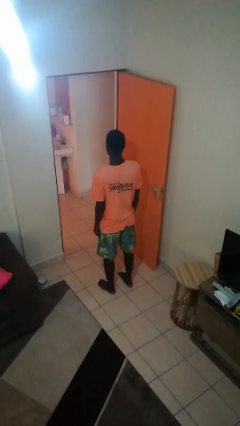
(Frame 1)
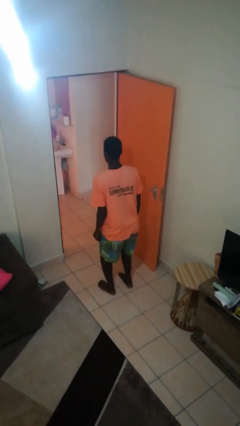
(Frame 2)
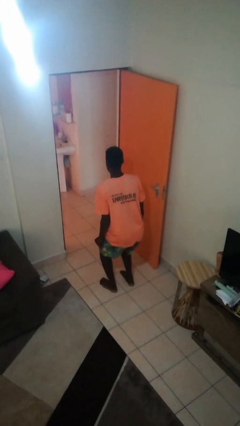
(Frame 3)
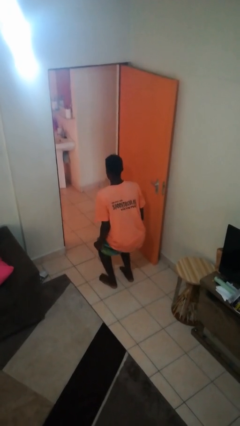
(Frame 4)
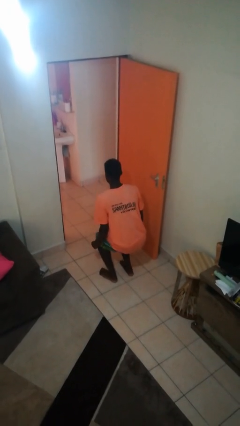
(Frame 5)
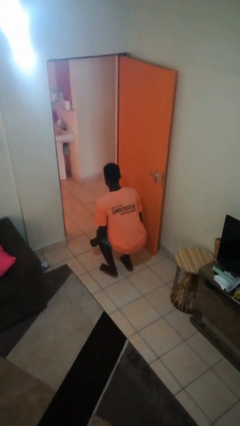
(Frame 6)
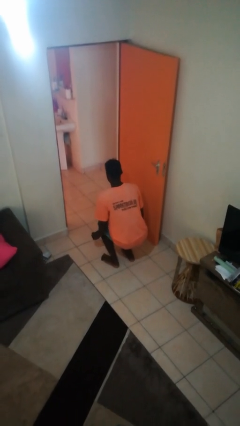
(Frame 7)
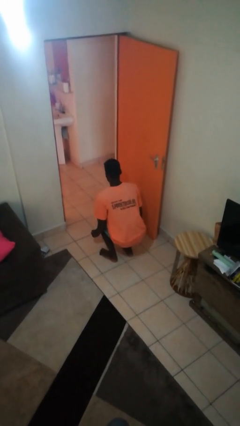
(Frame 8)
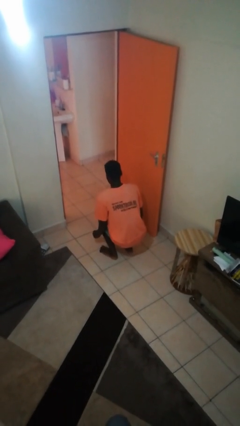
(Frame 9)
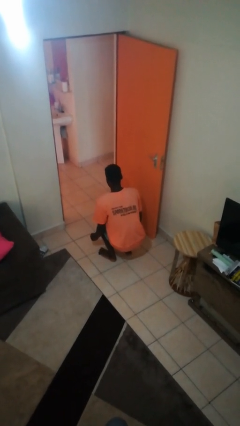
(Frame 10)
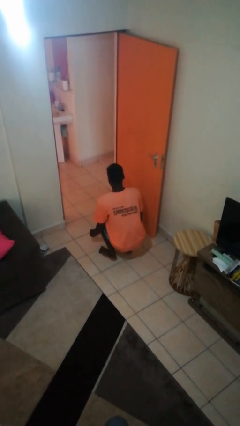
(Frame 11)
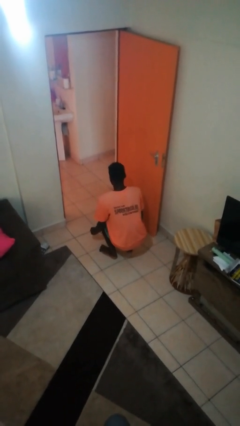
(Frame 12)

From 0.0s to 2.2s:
person squats

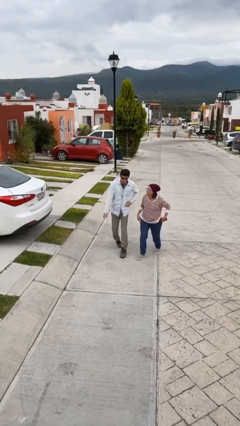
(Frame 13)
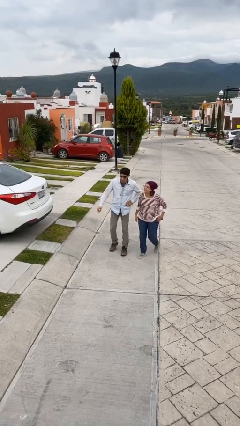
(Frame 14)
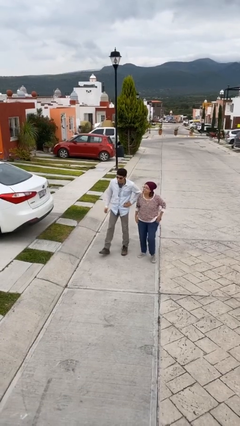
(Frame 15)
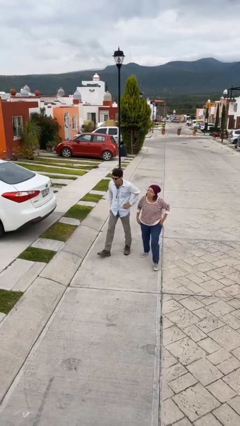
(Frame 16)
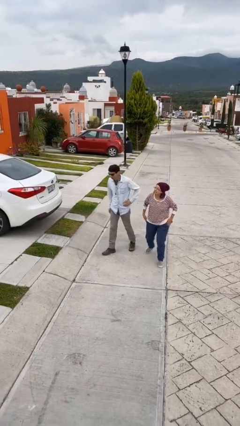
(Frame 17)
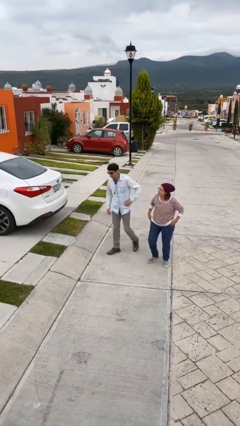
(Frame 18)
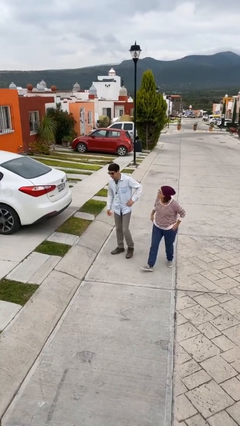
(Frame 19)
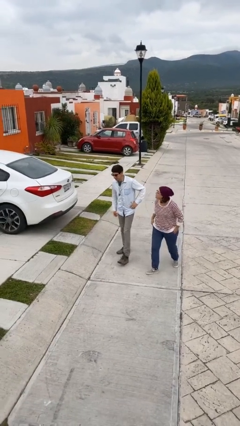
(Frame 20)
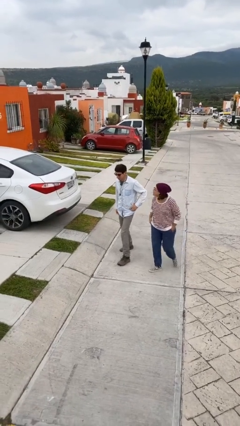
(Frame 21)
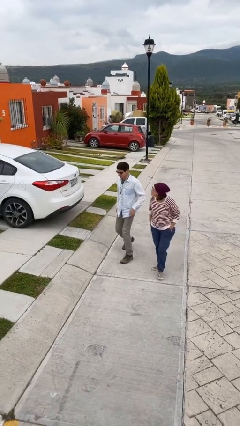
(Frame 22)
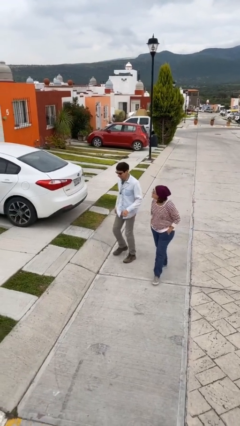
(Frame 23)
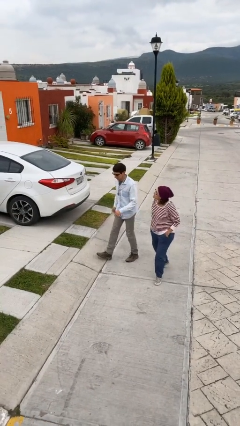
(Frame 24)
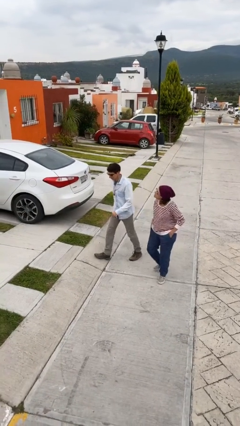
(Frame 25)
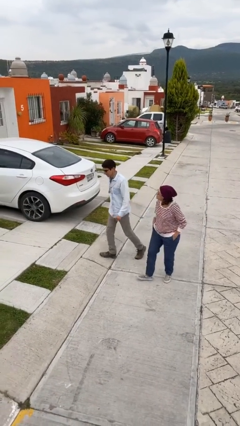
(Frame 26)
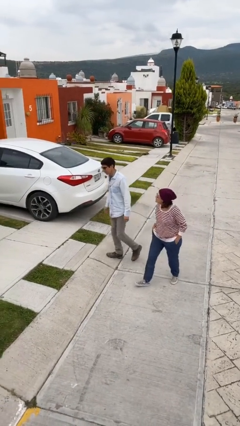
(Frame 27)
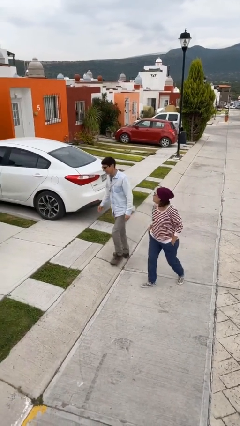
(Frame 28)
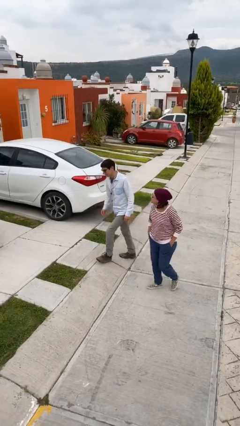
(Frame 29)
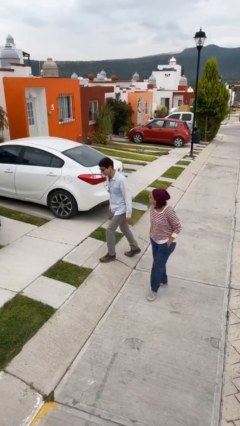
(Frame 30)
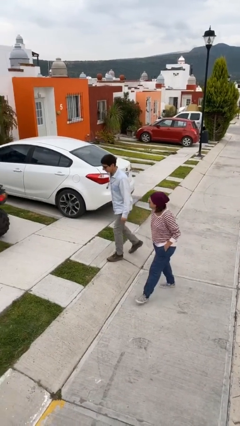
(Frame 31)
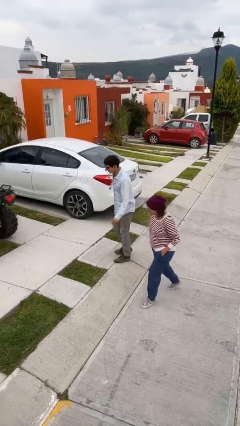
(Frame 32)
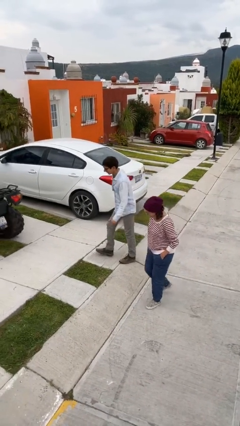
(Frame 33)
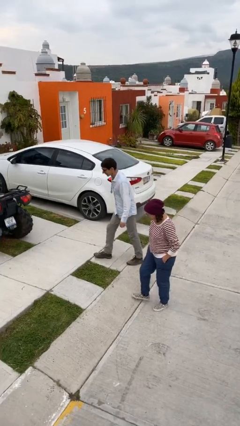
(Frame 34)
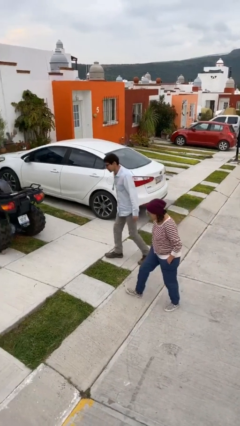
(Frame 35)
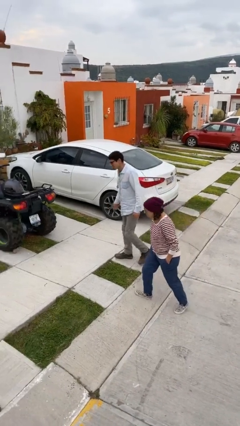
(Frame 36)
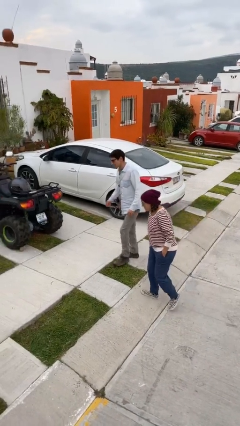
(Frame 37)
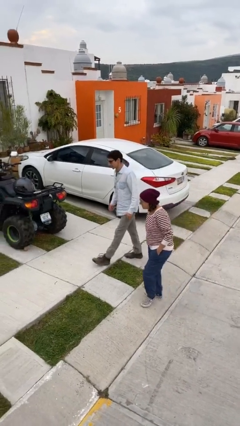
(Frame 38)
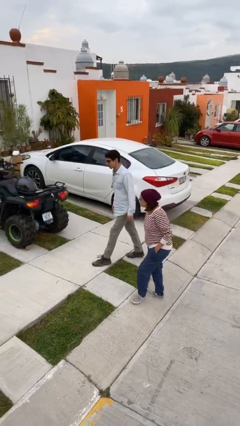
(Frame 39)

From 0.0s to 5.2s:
person talks to person

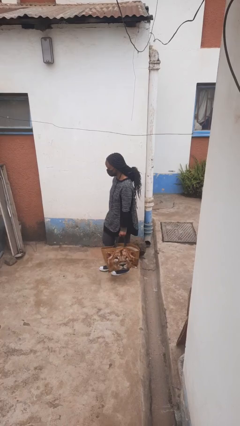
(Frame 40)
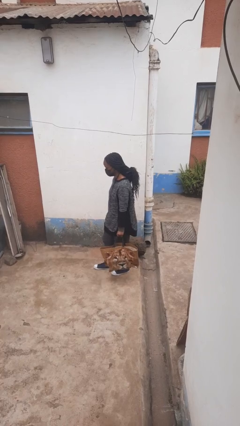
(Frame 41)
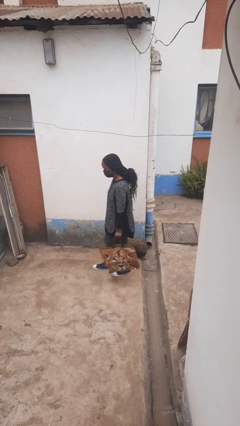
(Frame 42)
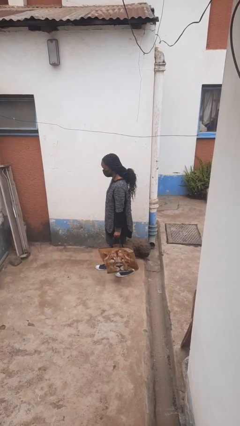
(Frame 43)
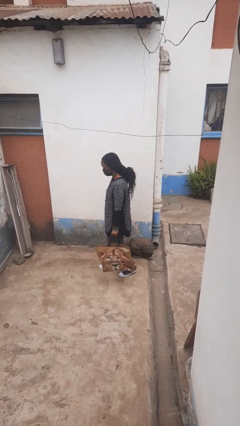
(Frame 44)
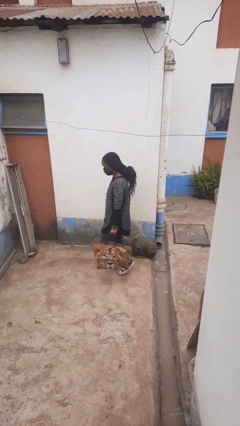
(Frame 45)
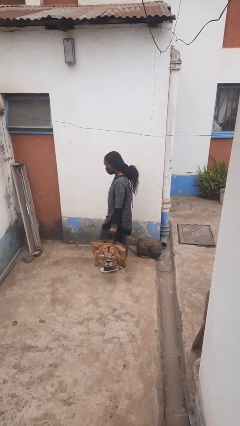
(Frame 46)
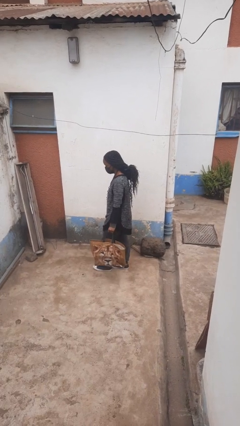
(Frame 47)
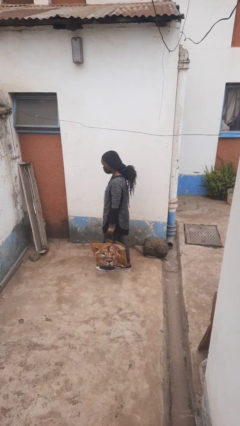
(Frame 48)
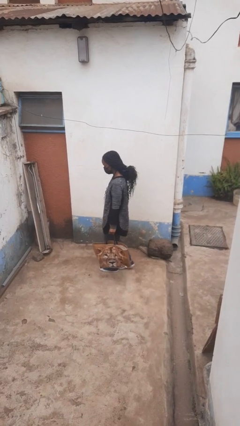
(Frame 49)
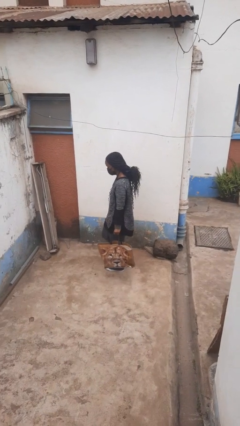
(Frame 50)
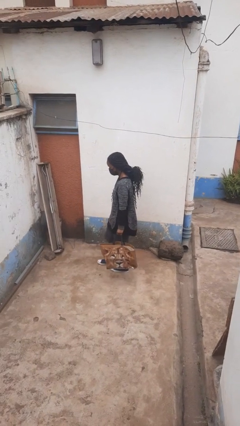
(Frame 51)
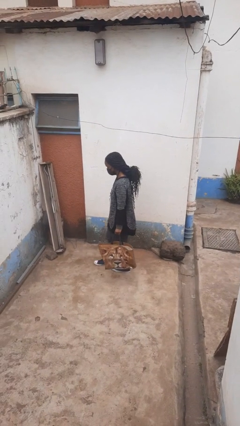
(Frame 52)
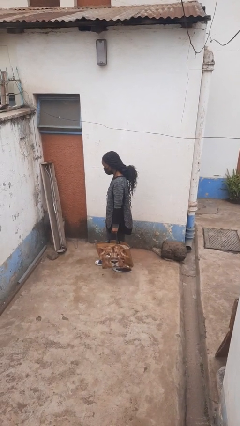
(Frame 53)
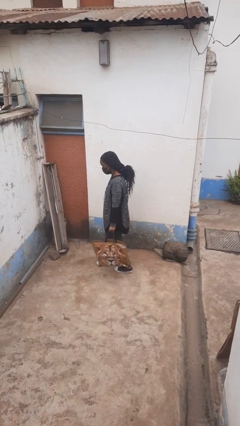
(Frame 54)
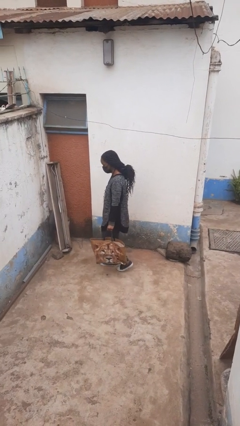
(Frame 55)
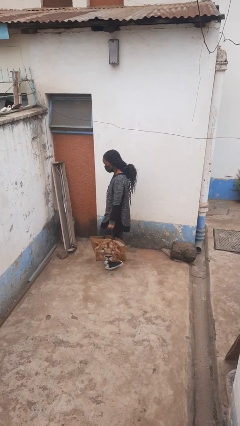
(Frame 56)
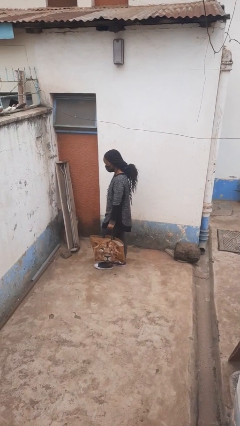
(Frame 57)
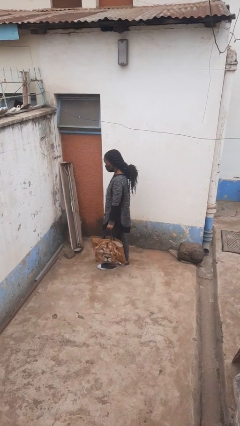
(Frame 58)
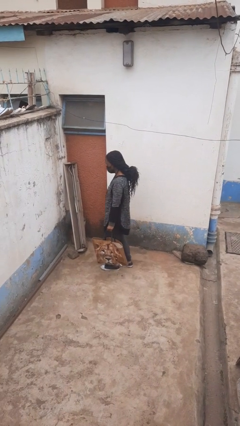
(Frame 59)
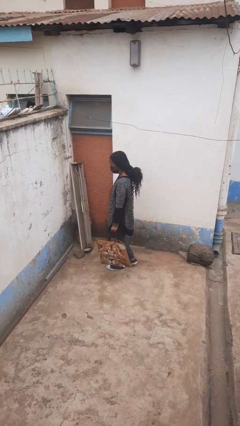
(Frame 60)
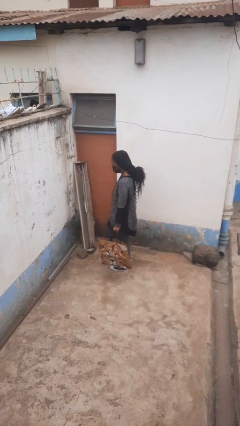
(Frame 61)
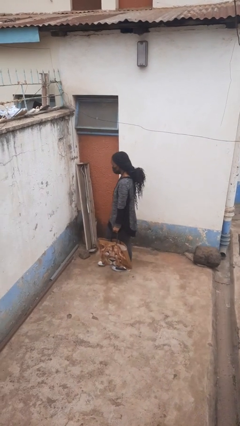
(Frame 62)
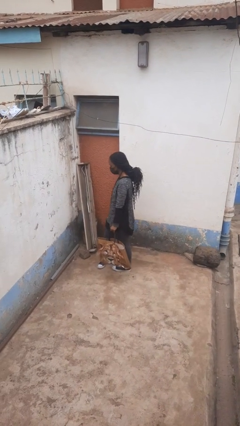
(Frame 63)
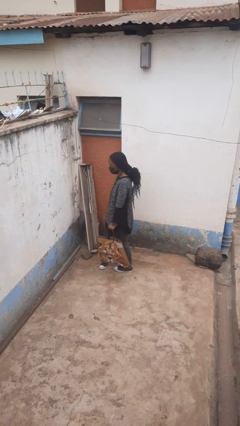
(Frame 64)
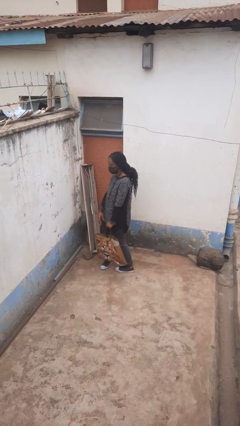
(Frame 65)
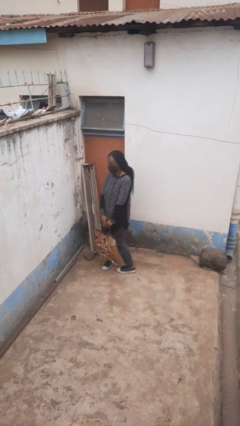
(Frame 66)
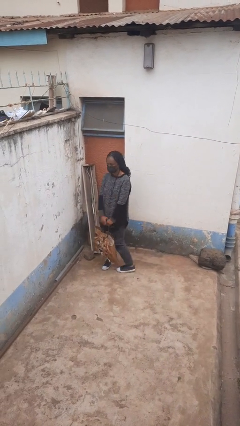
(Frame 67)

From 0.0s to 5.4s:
person carries groceries

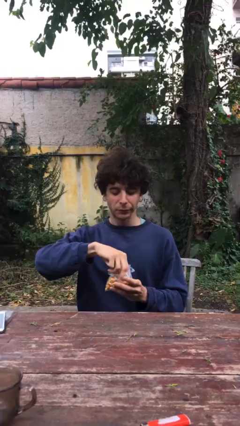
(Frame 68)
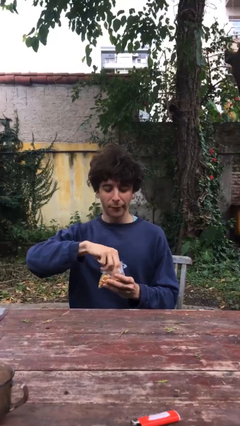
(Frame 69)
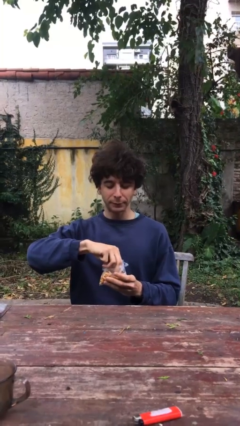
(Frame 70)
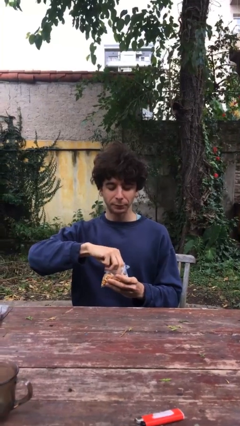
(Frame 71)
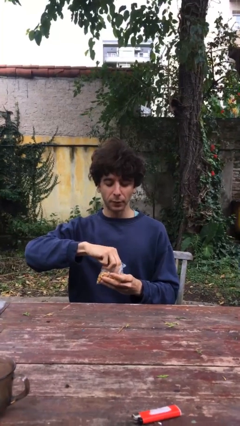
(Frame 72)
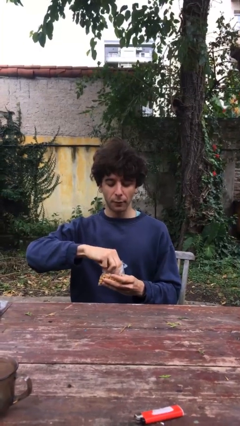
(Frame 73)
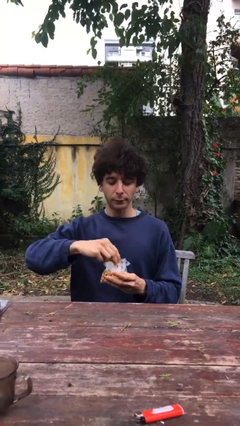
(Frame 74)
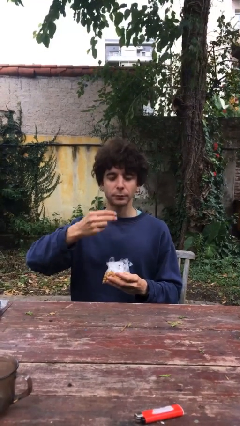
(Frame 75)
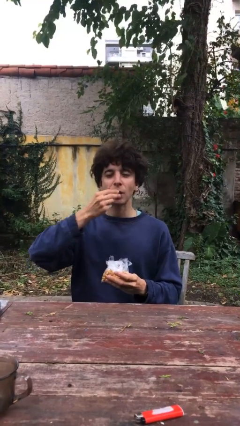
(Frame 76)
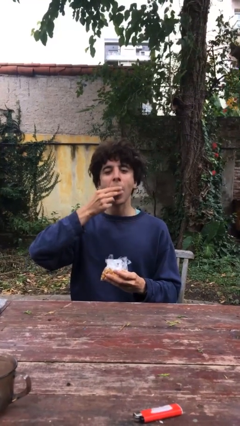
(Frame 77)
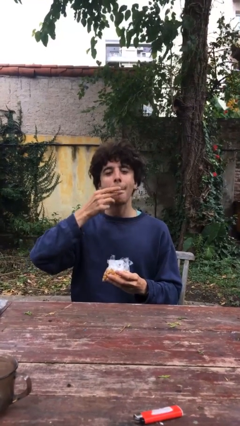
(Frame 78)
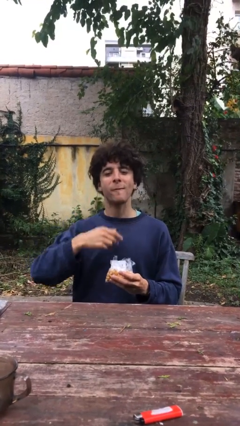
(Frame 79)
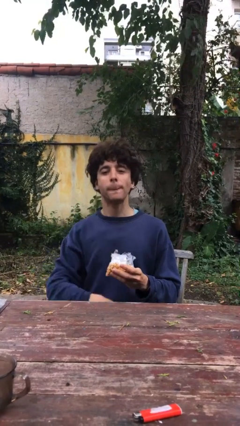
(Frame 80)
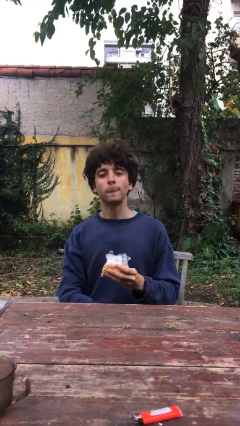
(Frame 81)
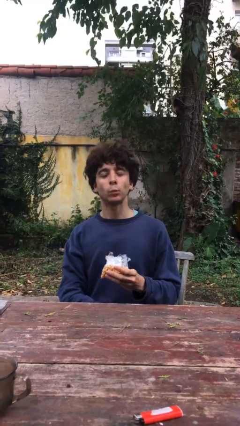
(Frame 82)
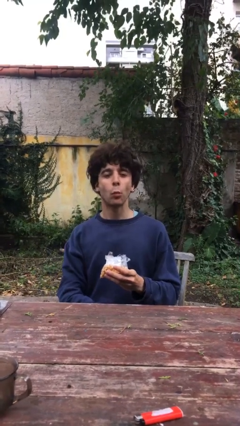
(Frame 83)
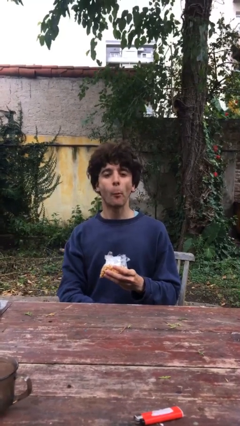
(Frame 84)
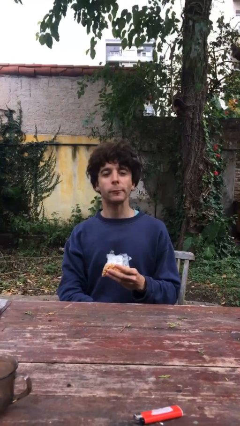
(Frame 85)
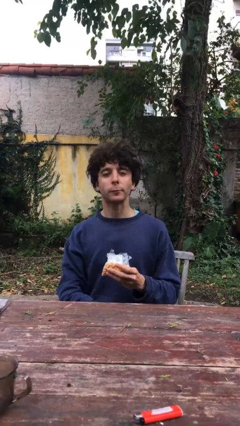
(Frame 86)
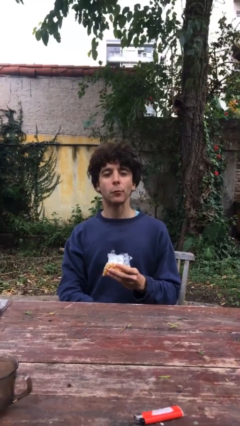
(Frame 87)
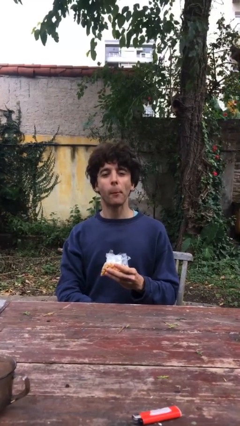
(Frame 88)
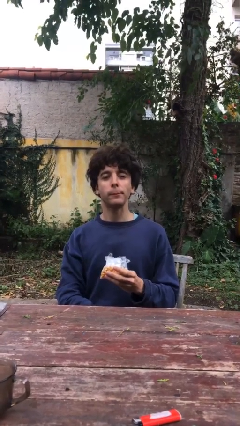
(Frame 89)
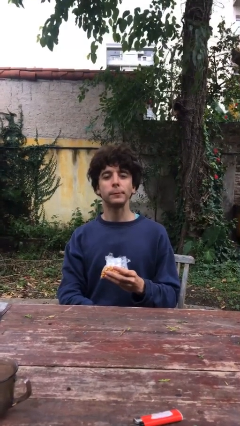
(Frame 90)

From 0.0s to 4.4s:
person eats snack from bag
